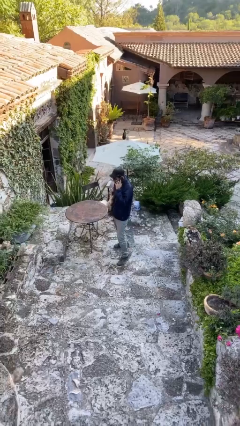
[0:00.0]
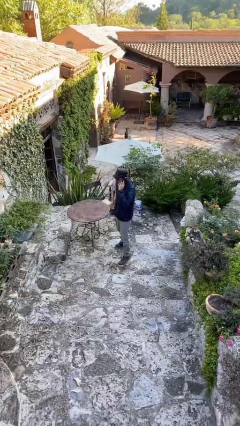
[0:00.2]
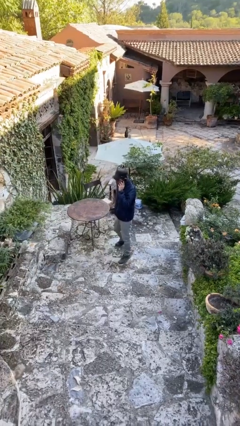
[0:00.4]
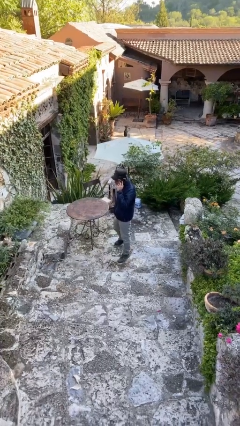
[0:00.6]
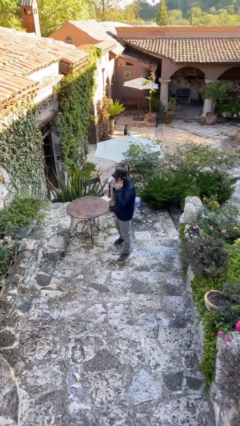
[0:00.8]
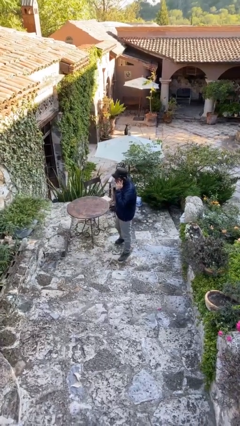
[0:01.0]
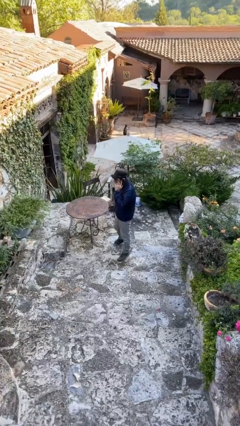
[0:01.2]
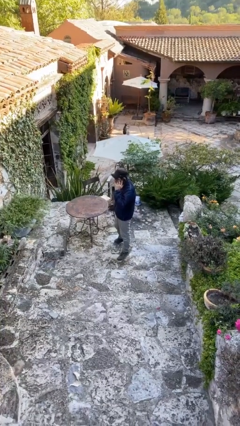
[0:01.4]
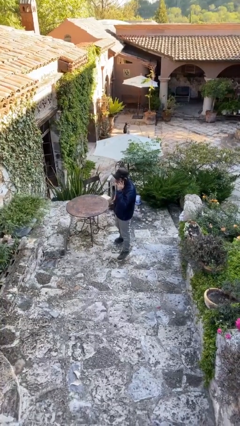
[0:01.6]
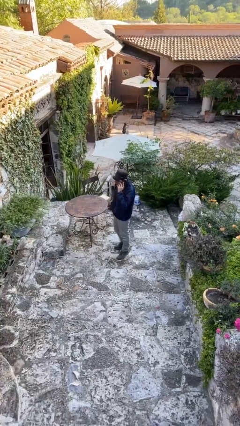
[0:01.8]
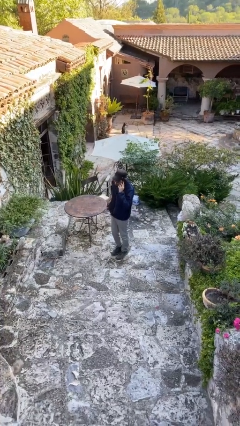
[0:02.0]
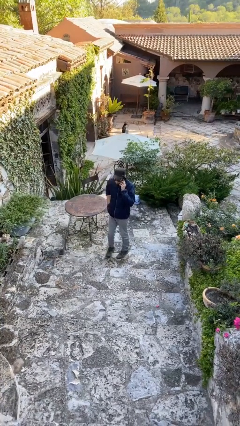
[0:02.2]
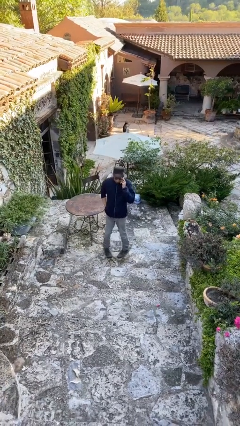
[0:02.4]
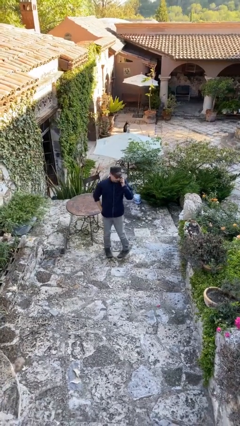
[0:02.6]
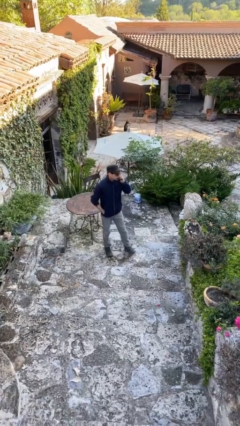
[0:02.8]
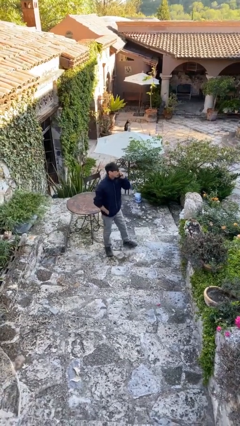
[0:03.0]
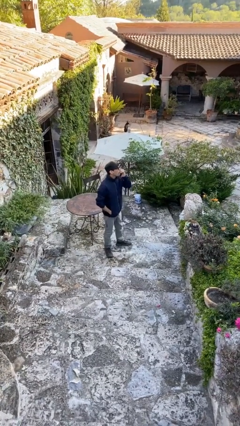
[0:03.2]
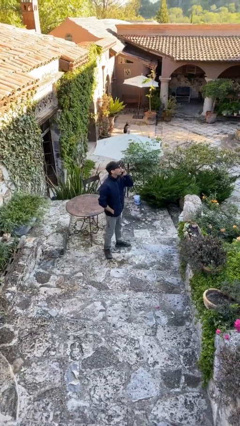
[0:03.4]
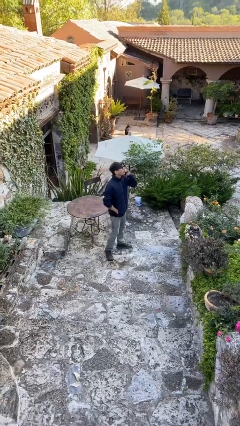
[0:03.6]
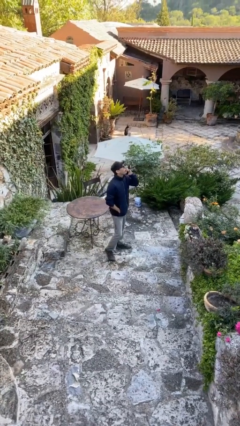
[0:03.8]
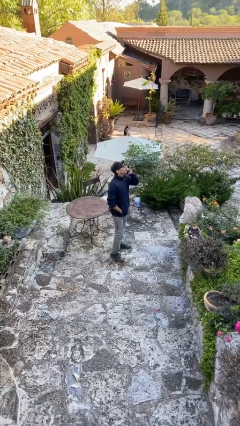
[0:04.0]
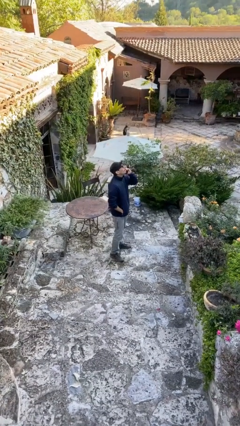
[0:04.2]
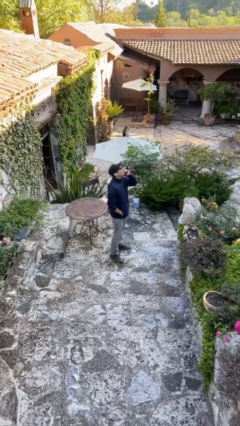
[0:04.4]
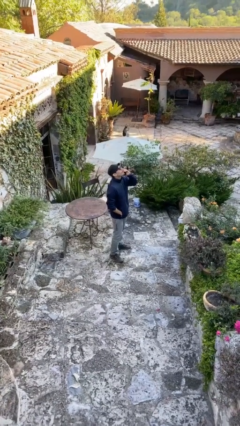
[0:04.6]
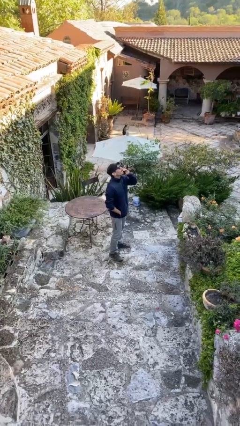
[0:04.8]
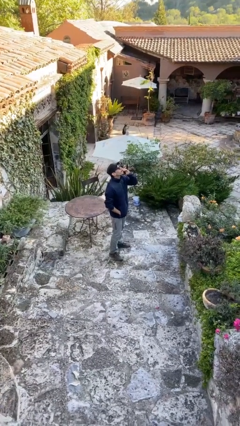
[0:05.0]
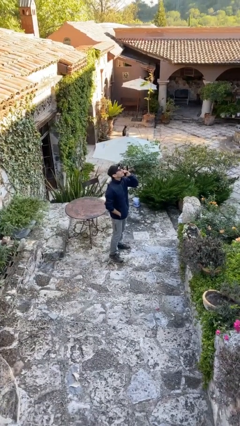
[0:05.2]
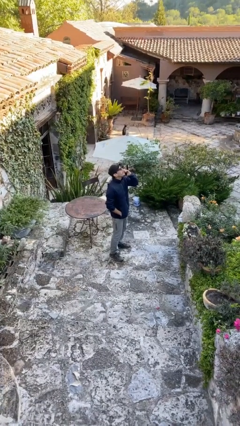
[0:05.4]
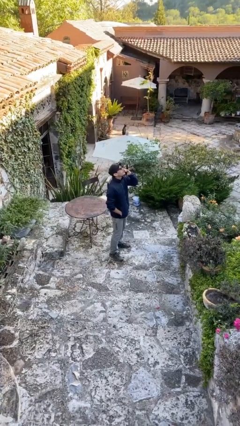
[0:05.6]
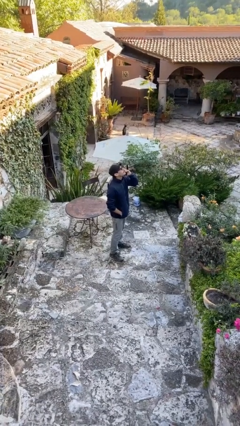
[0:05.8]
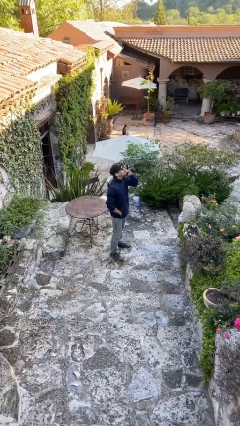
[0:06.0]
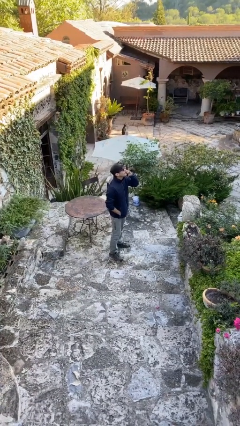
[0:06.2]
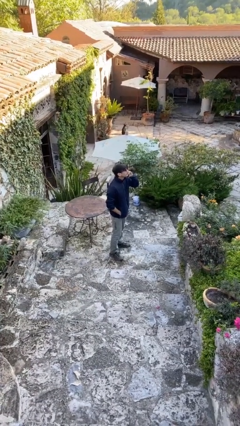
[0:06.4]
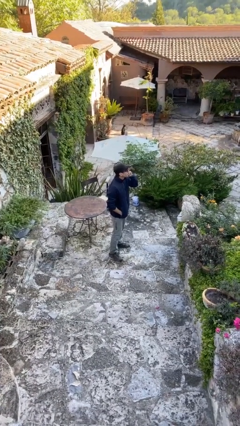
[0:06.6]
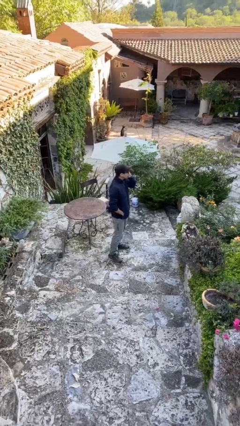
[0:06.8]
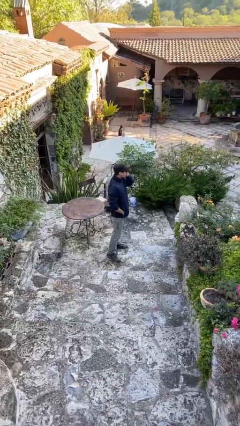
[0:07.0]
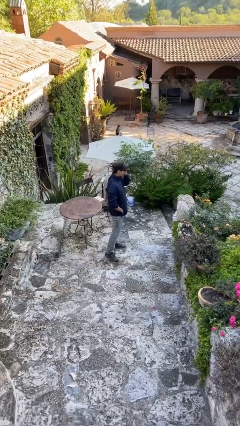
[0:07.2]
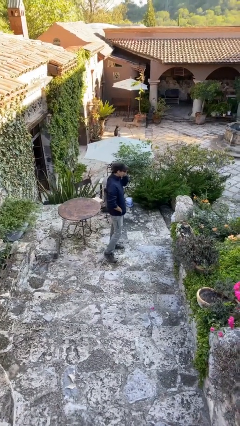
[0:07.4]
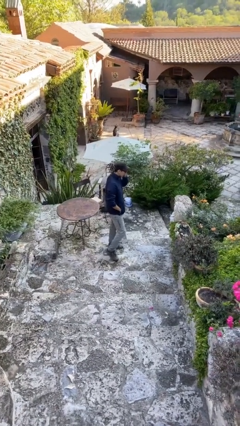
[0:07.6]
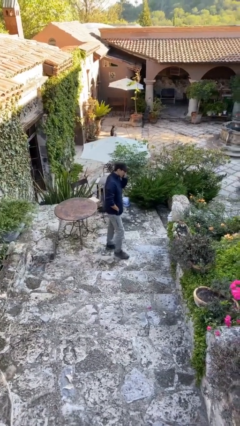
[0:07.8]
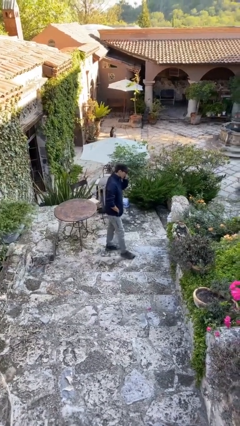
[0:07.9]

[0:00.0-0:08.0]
person talks on phone

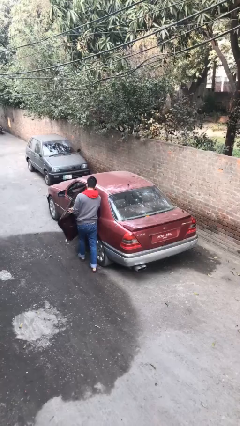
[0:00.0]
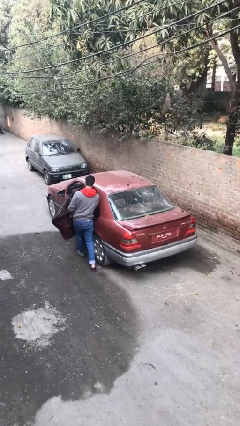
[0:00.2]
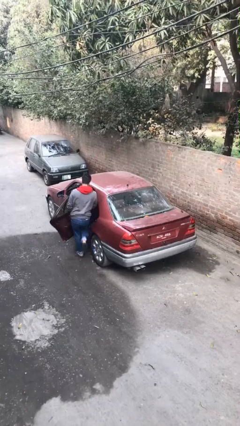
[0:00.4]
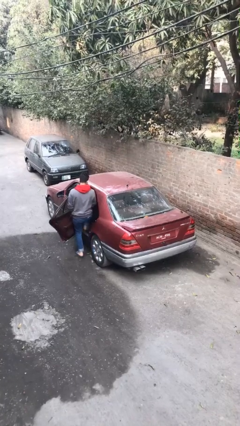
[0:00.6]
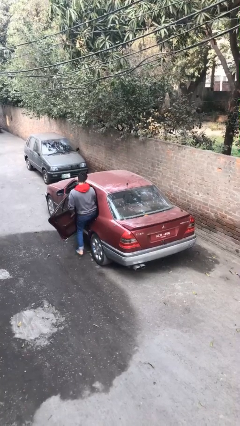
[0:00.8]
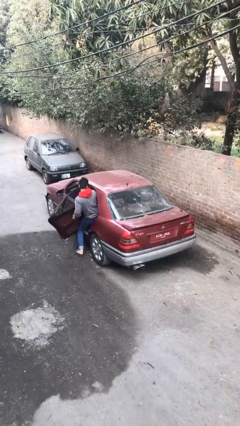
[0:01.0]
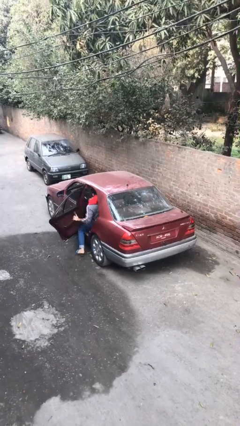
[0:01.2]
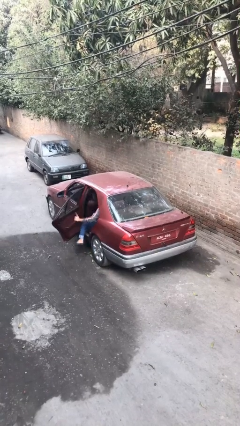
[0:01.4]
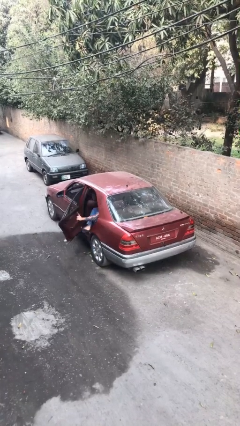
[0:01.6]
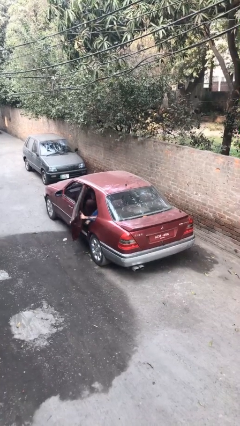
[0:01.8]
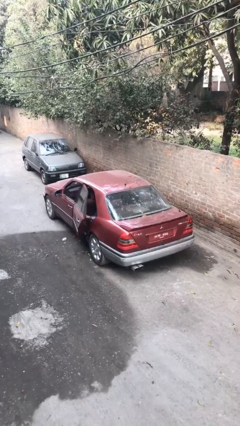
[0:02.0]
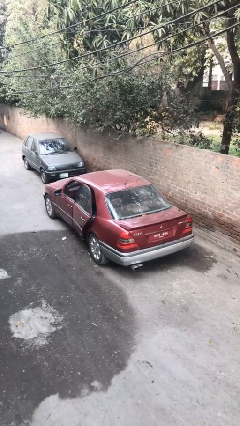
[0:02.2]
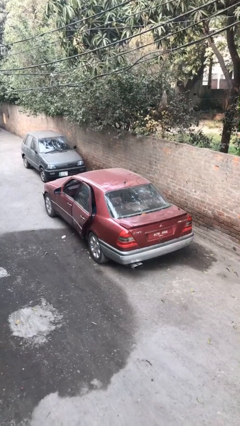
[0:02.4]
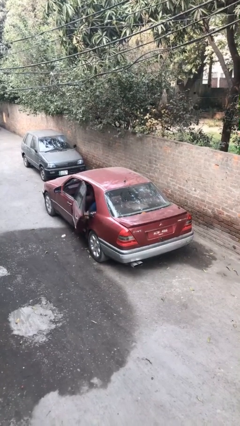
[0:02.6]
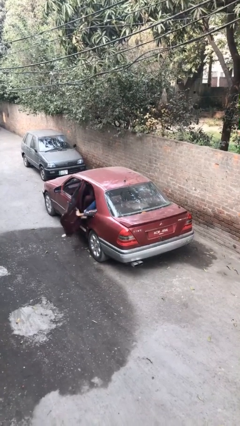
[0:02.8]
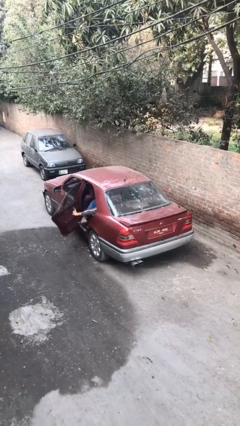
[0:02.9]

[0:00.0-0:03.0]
car picks up person

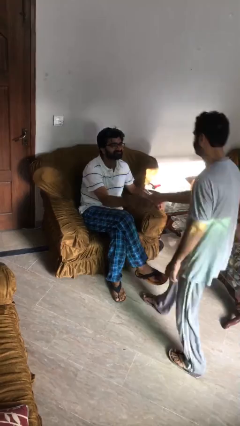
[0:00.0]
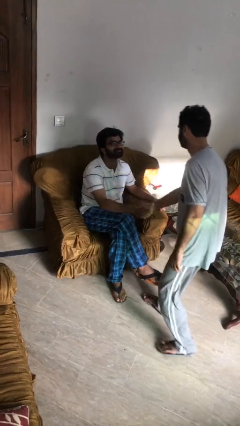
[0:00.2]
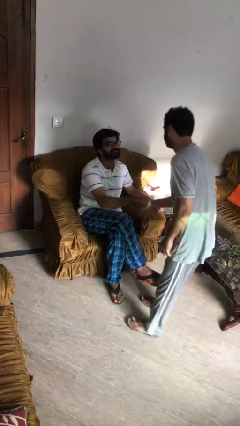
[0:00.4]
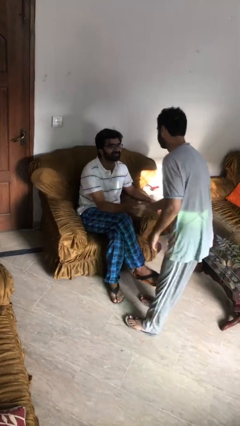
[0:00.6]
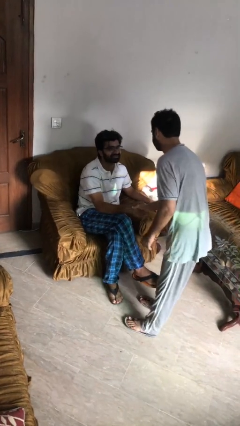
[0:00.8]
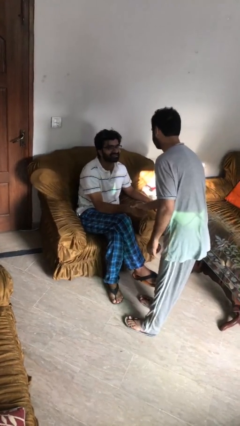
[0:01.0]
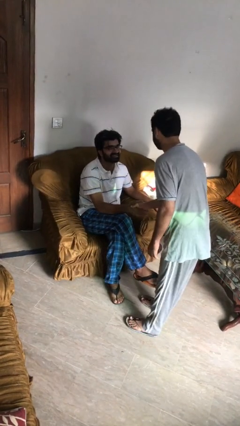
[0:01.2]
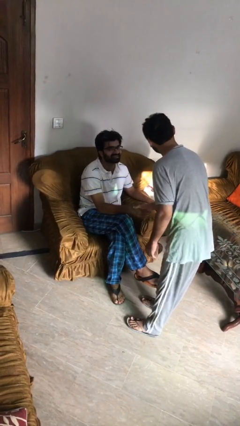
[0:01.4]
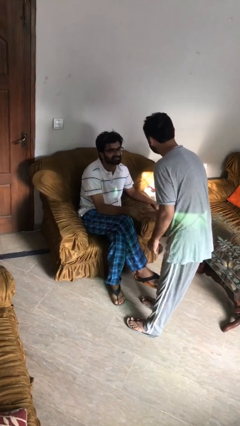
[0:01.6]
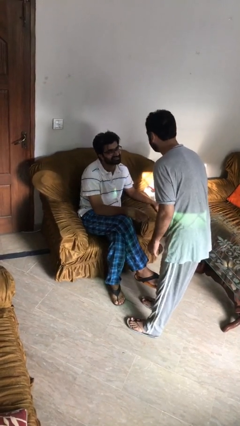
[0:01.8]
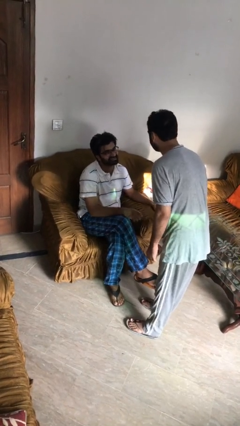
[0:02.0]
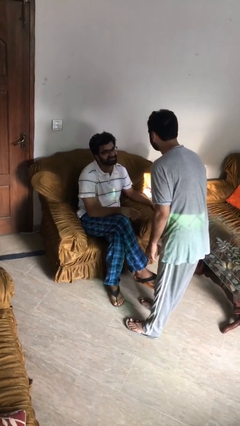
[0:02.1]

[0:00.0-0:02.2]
person shakes hand

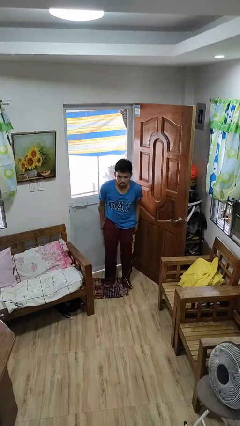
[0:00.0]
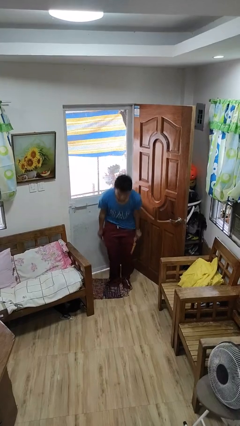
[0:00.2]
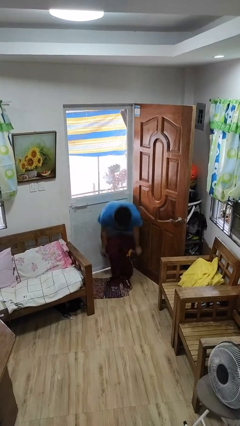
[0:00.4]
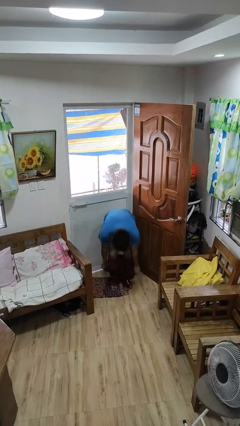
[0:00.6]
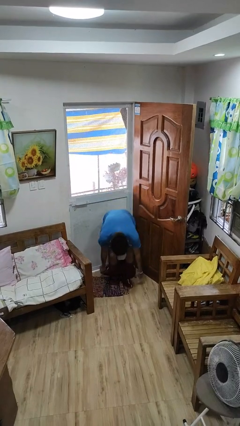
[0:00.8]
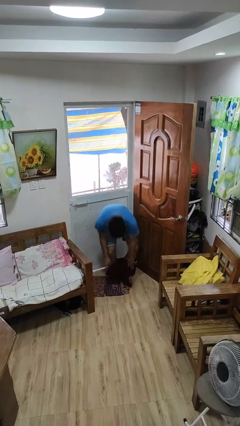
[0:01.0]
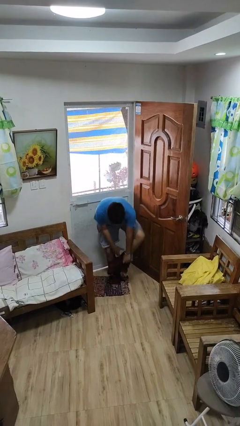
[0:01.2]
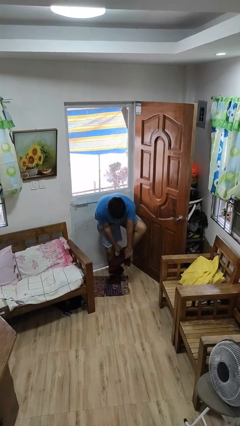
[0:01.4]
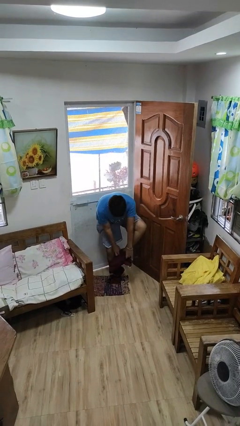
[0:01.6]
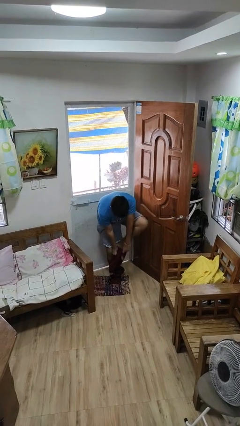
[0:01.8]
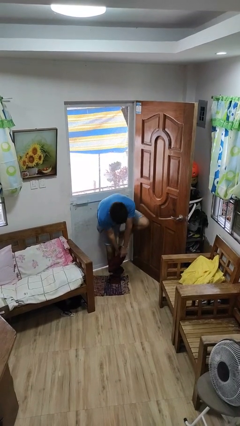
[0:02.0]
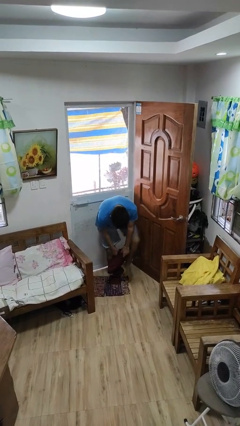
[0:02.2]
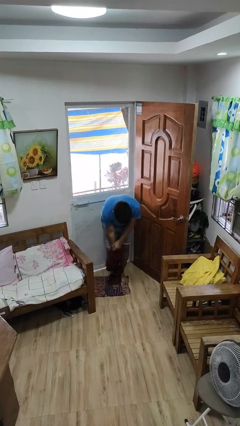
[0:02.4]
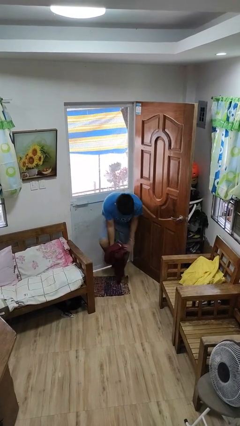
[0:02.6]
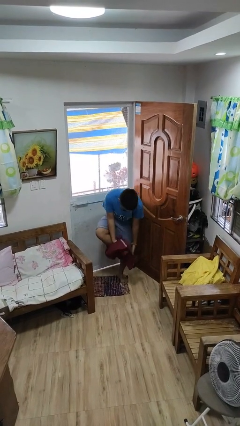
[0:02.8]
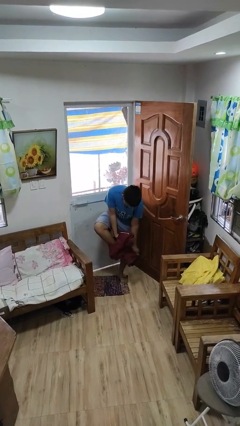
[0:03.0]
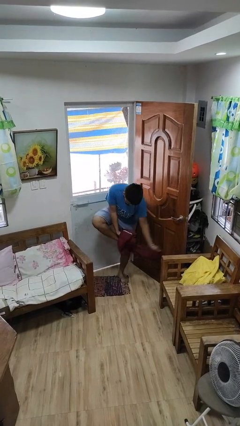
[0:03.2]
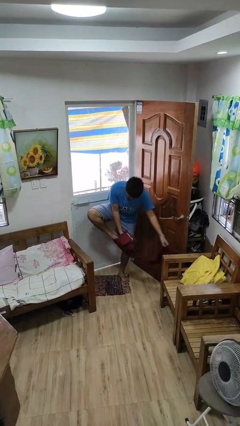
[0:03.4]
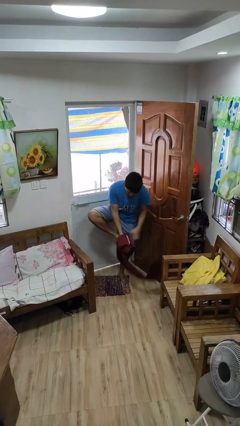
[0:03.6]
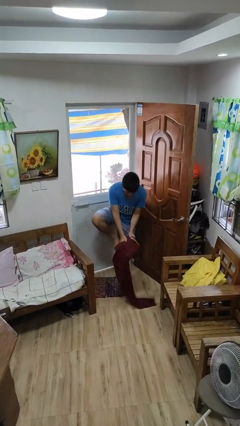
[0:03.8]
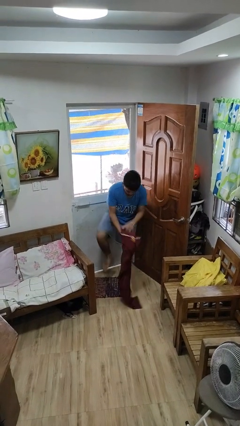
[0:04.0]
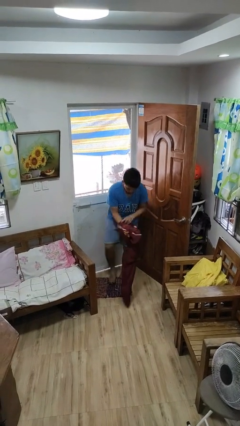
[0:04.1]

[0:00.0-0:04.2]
person takes off pants

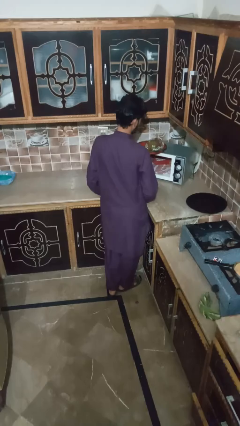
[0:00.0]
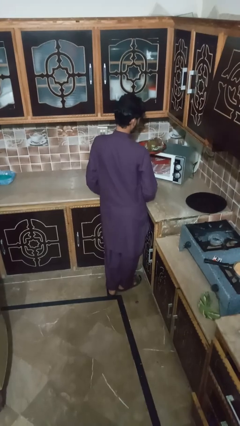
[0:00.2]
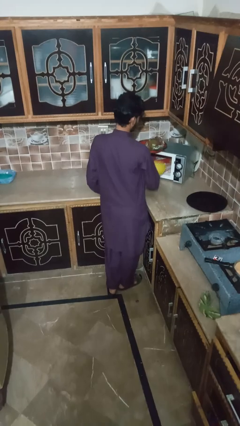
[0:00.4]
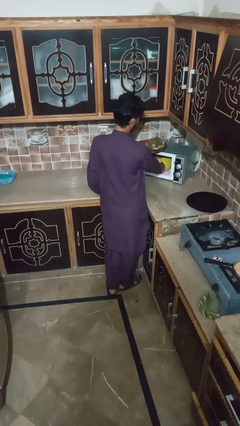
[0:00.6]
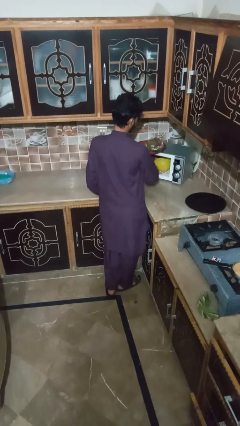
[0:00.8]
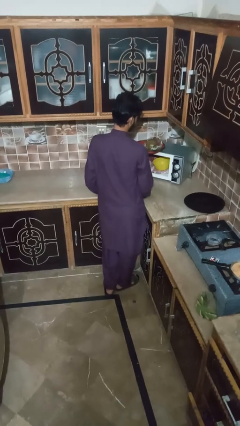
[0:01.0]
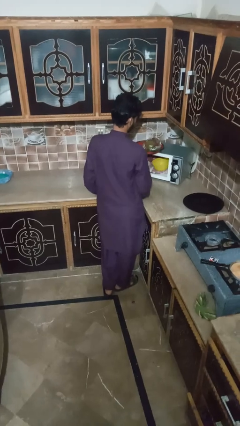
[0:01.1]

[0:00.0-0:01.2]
person puts object into microwave
